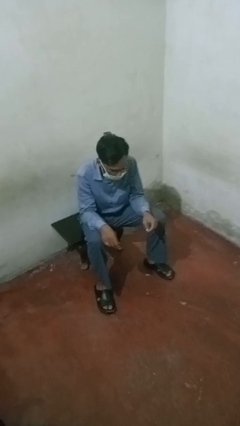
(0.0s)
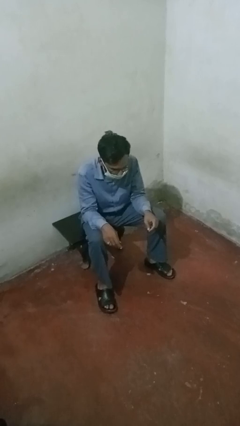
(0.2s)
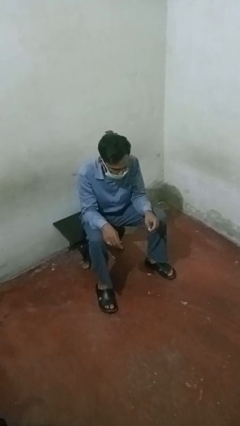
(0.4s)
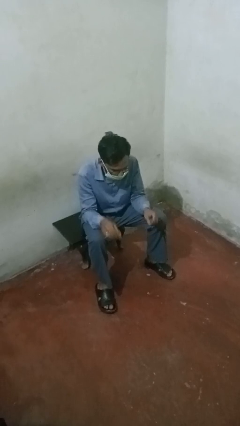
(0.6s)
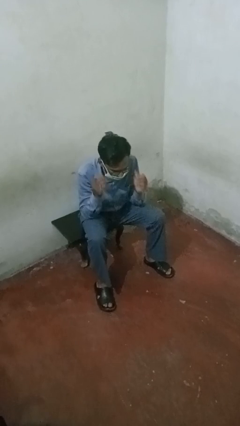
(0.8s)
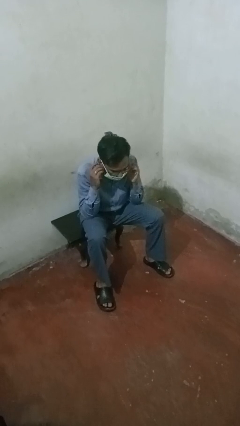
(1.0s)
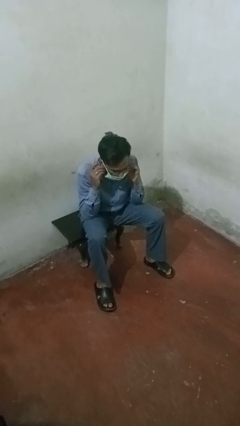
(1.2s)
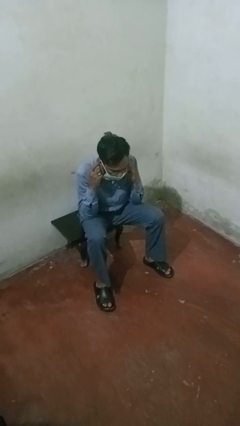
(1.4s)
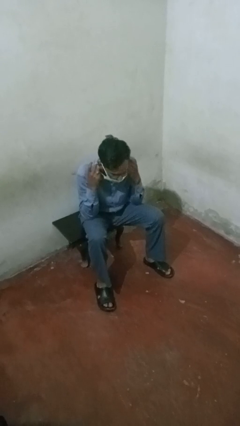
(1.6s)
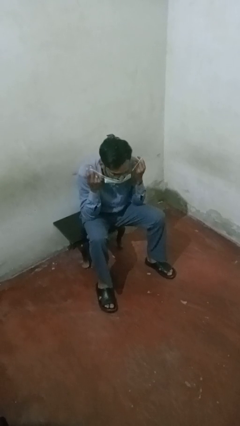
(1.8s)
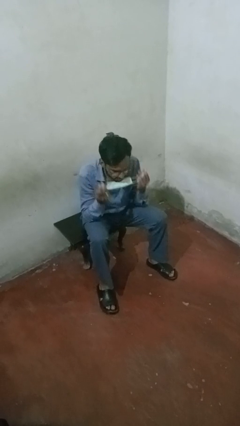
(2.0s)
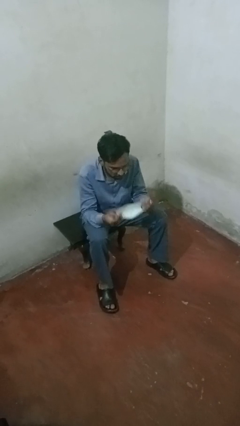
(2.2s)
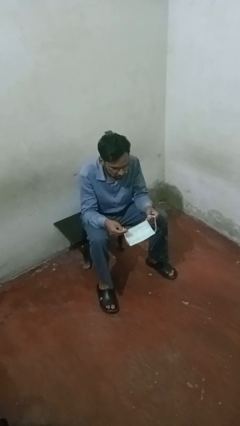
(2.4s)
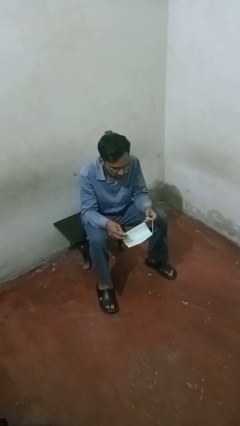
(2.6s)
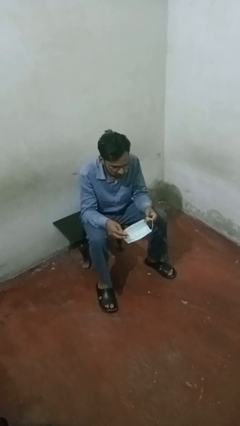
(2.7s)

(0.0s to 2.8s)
person takes off facemask

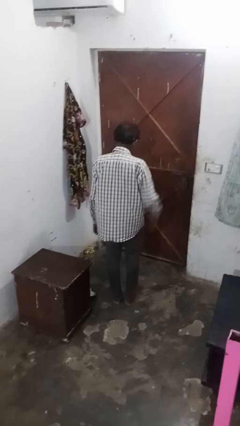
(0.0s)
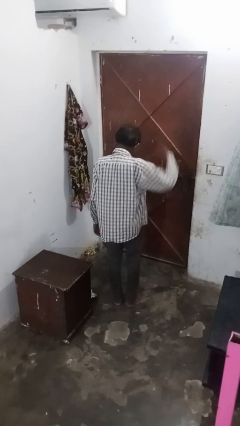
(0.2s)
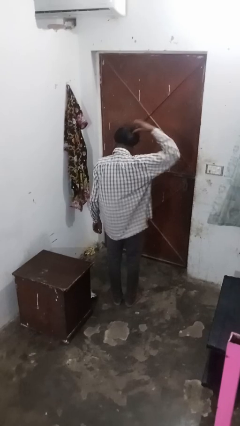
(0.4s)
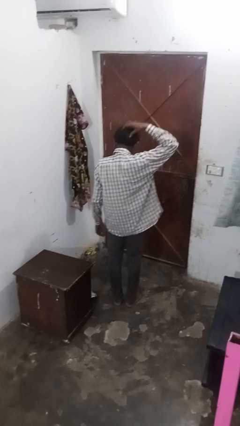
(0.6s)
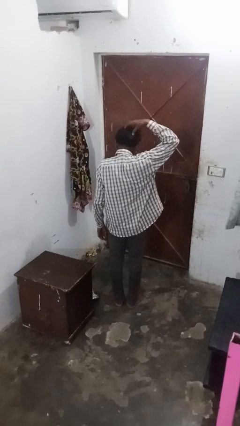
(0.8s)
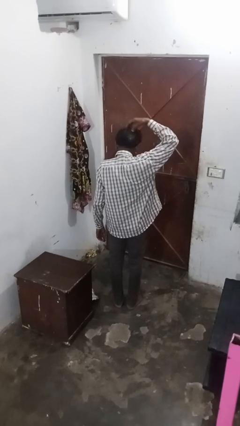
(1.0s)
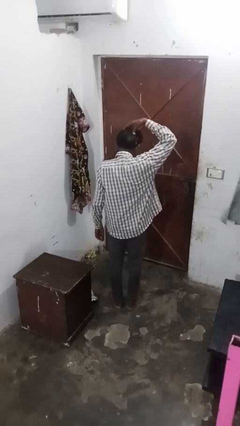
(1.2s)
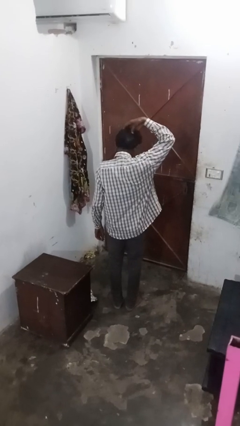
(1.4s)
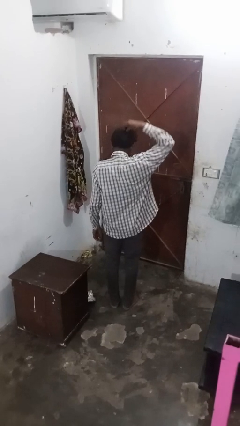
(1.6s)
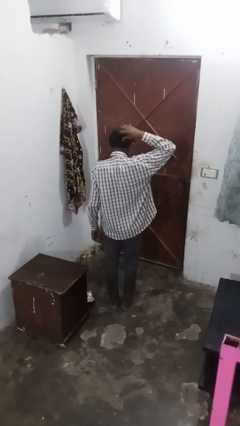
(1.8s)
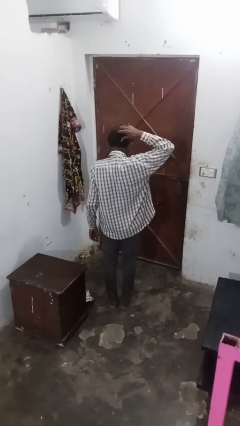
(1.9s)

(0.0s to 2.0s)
person strokes hair

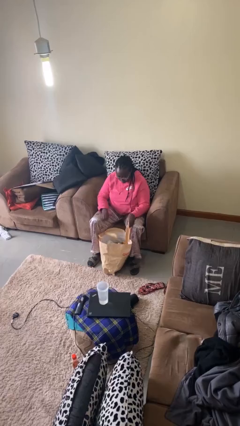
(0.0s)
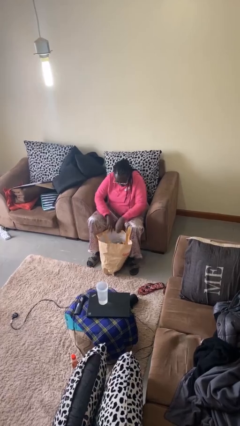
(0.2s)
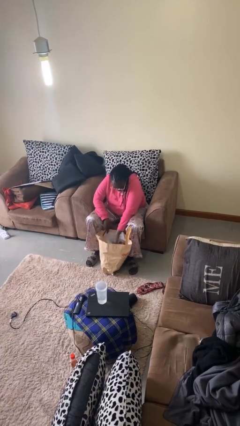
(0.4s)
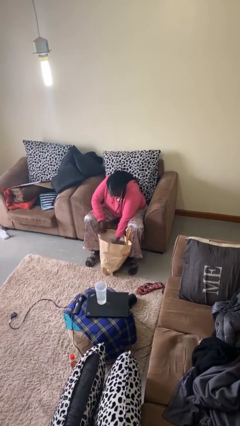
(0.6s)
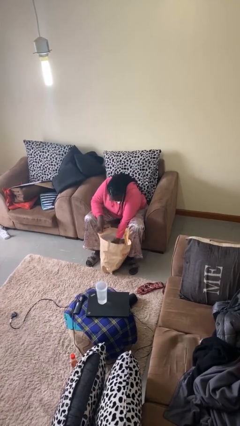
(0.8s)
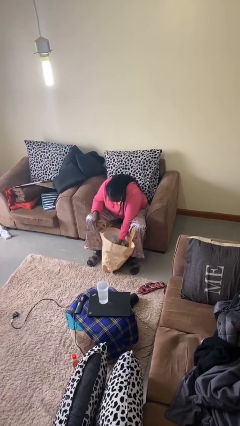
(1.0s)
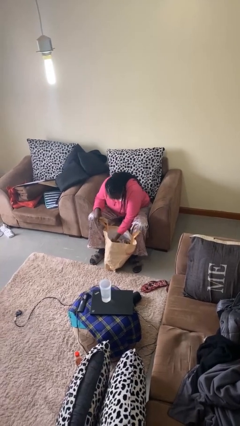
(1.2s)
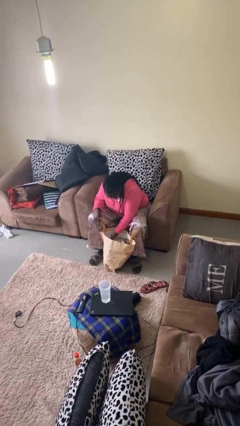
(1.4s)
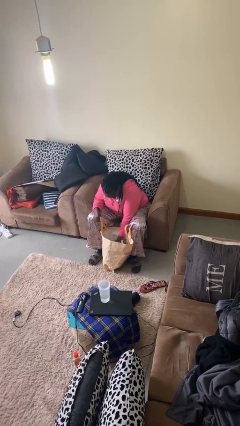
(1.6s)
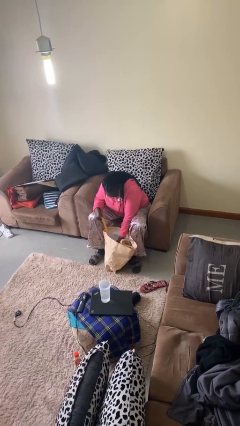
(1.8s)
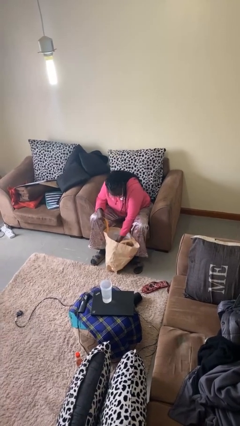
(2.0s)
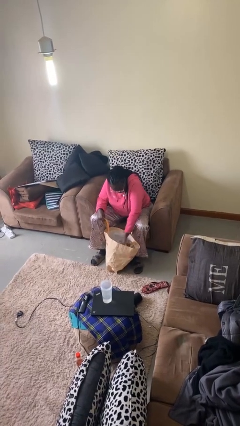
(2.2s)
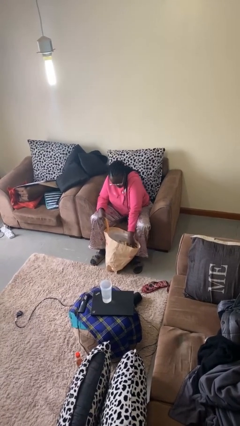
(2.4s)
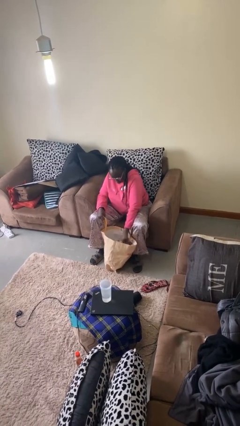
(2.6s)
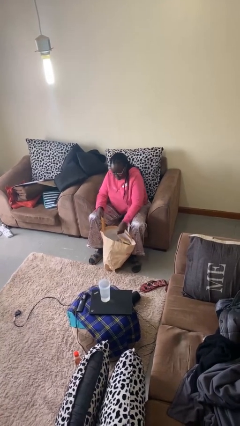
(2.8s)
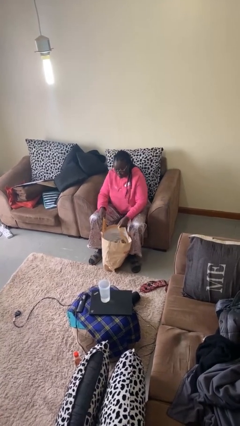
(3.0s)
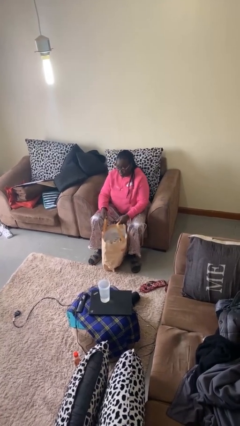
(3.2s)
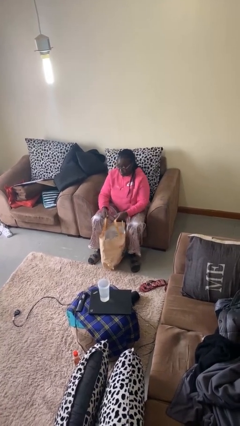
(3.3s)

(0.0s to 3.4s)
person searches in bag

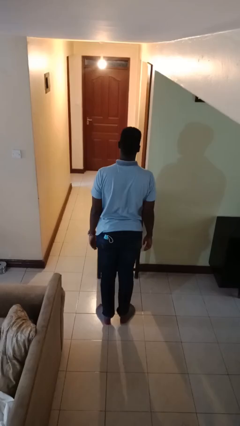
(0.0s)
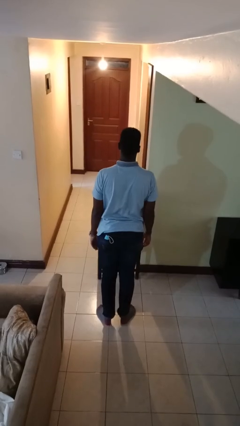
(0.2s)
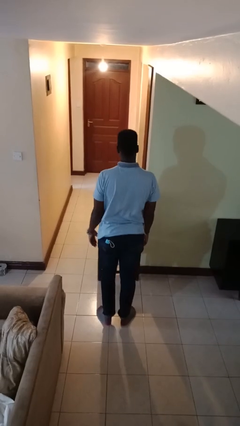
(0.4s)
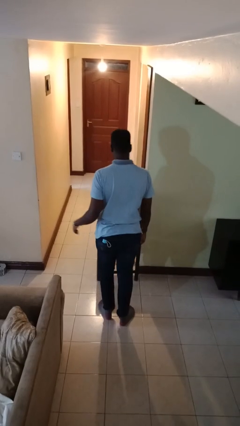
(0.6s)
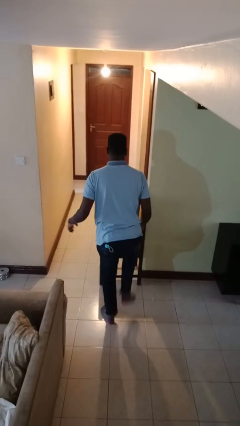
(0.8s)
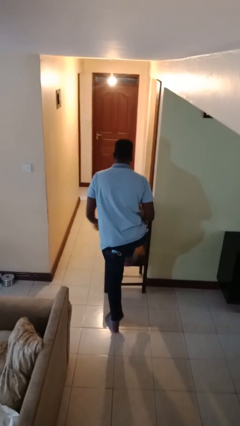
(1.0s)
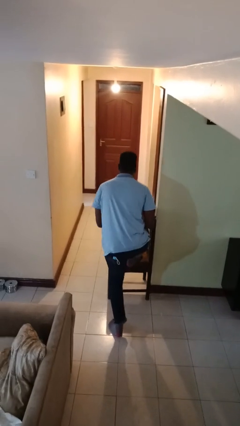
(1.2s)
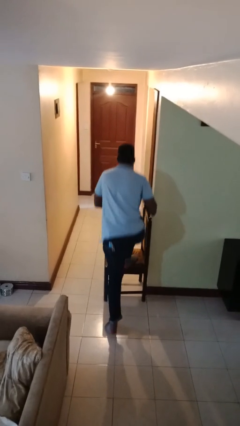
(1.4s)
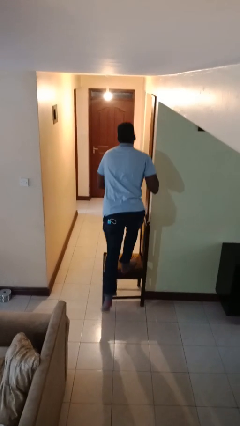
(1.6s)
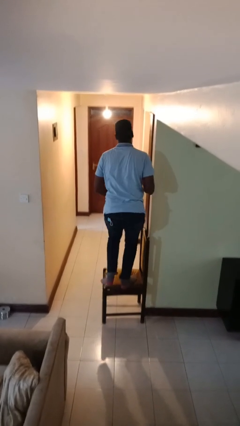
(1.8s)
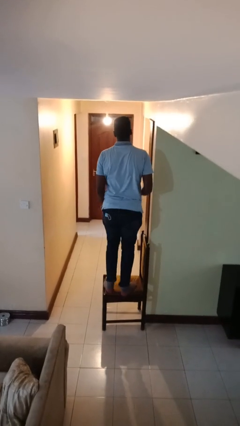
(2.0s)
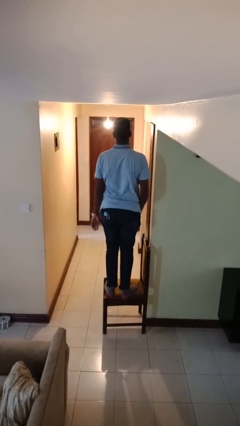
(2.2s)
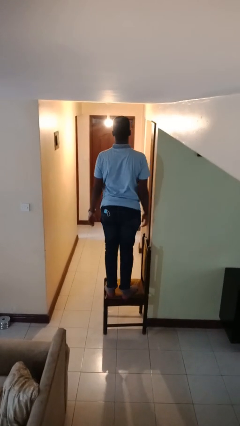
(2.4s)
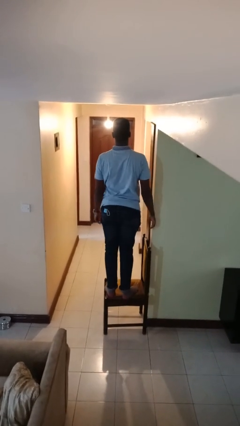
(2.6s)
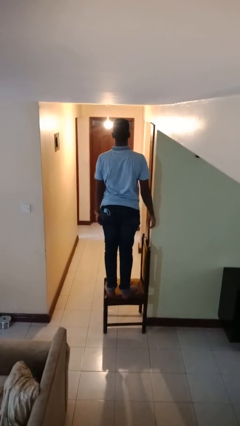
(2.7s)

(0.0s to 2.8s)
person climbs on chair

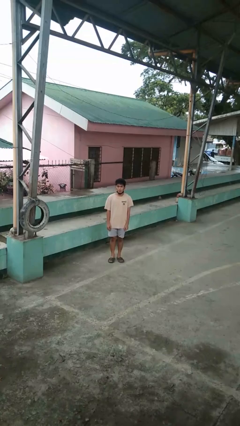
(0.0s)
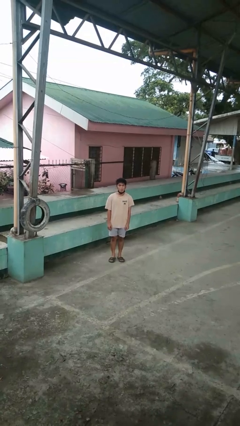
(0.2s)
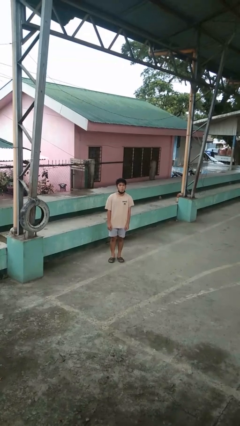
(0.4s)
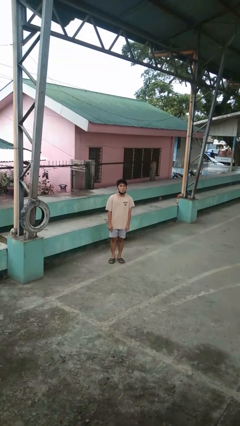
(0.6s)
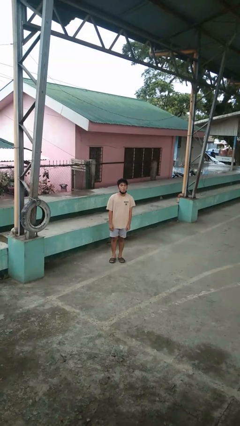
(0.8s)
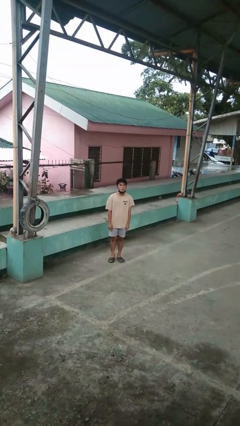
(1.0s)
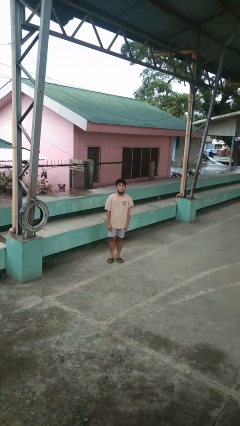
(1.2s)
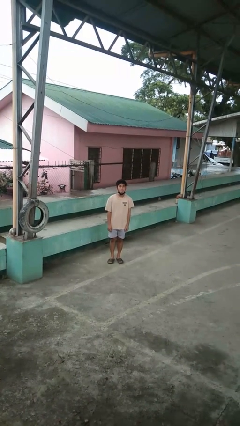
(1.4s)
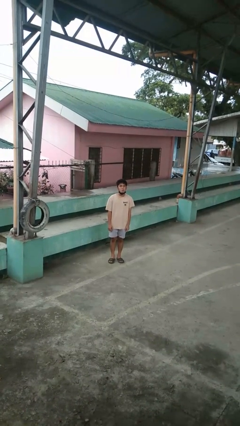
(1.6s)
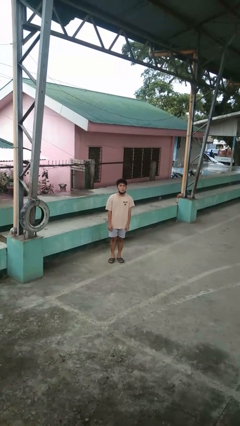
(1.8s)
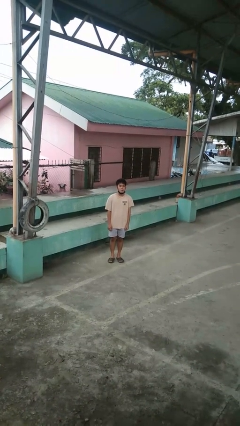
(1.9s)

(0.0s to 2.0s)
person sticks out tongue

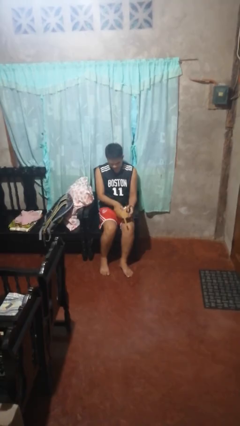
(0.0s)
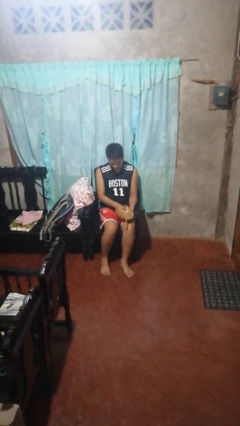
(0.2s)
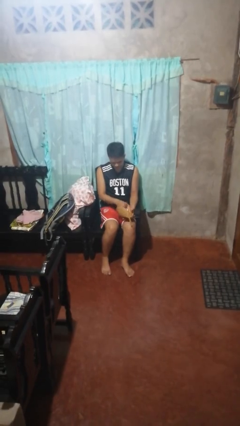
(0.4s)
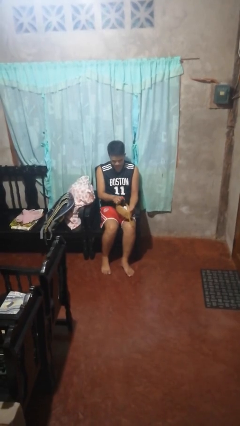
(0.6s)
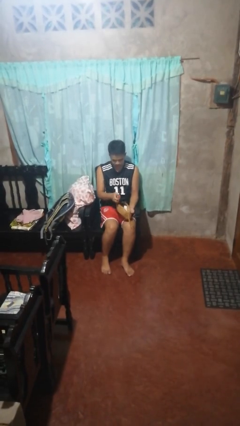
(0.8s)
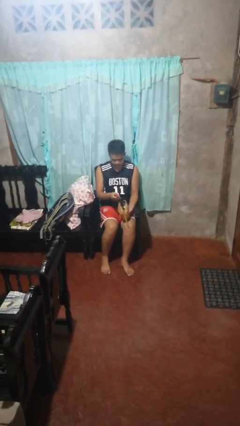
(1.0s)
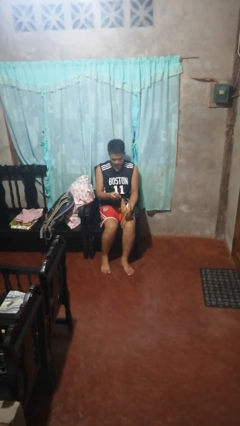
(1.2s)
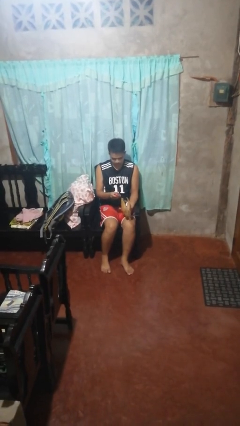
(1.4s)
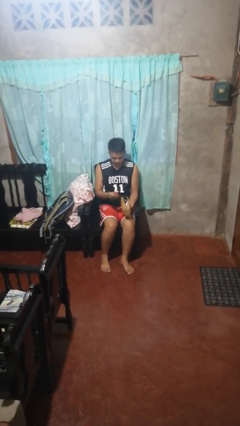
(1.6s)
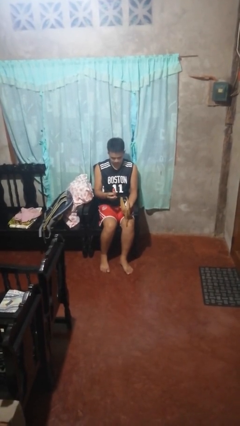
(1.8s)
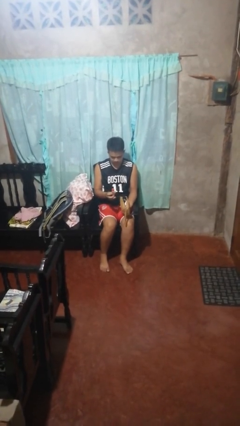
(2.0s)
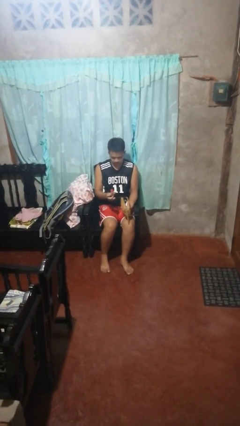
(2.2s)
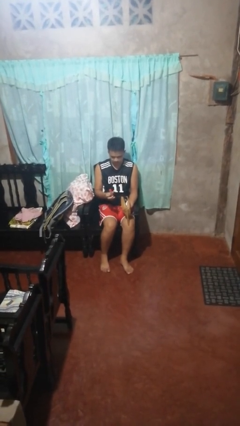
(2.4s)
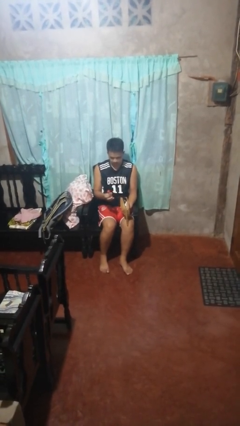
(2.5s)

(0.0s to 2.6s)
person takes object from purse

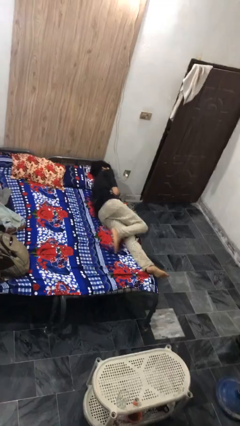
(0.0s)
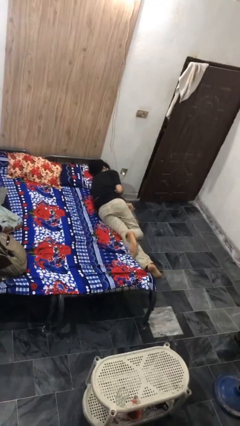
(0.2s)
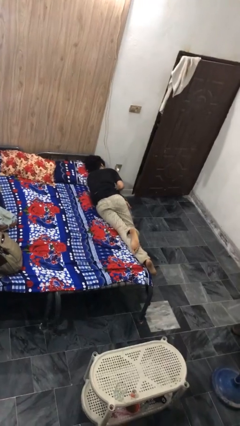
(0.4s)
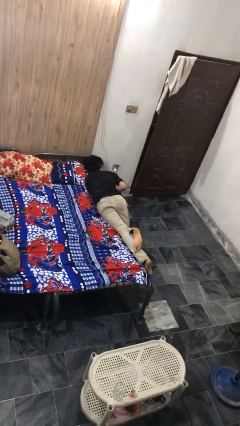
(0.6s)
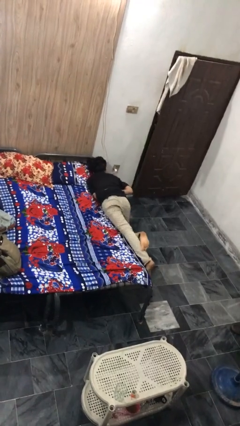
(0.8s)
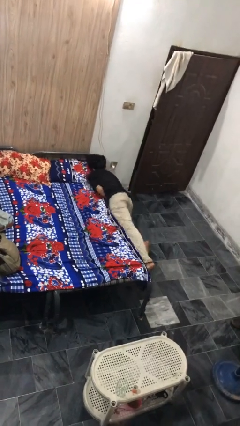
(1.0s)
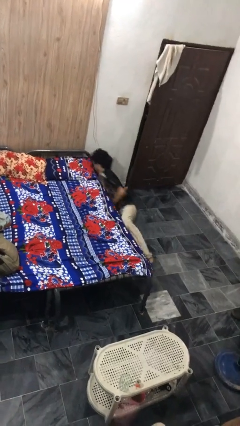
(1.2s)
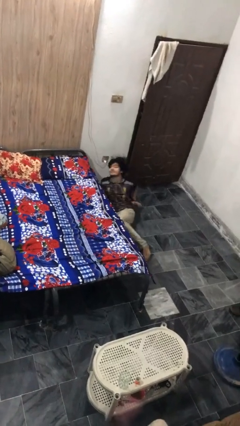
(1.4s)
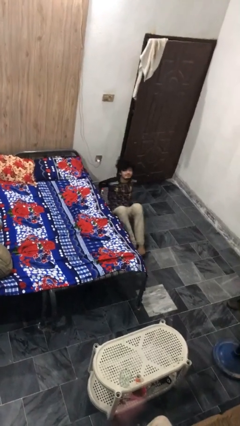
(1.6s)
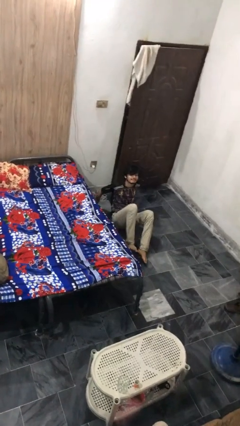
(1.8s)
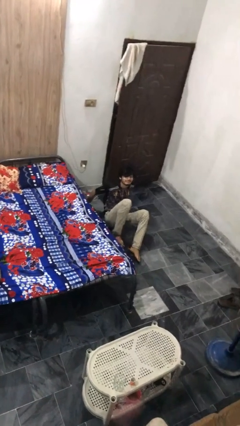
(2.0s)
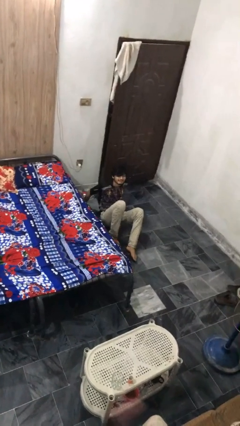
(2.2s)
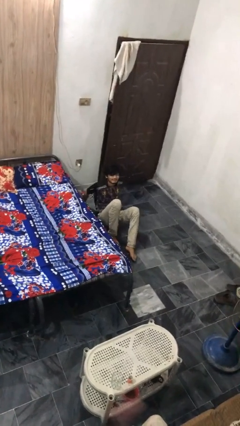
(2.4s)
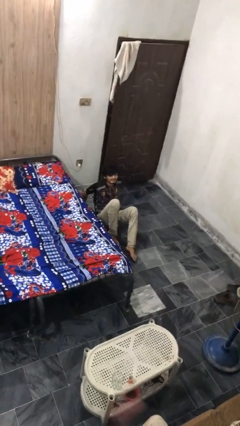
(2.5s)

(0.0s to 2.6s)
person falls from bed
